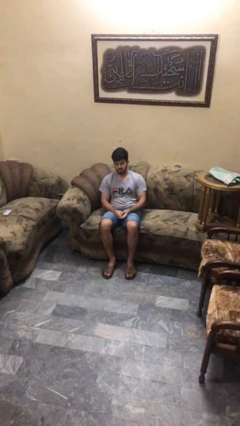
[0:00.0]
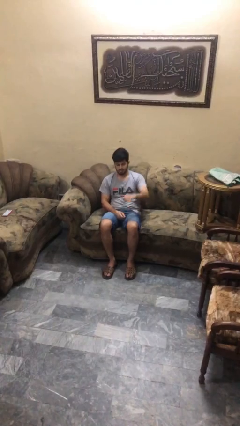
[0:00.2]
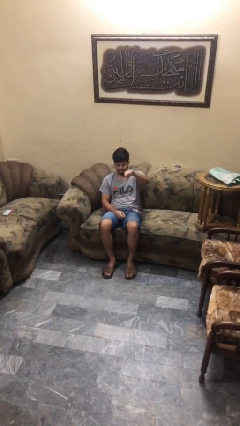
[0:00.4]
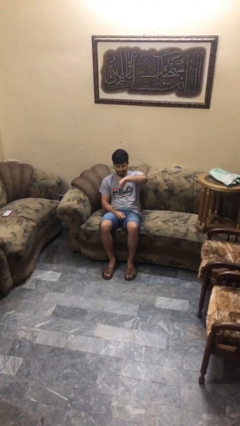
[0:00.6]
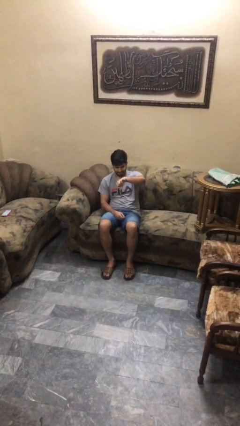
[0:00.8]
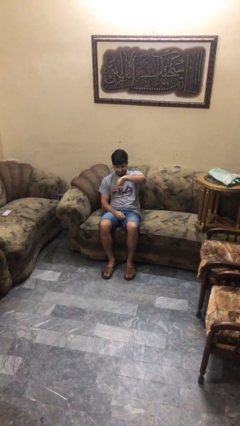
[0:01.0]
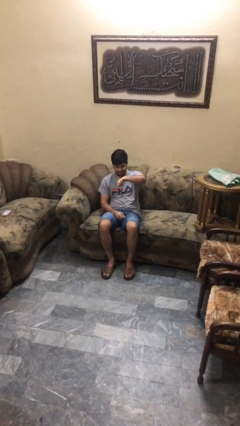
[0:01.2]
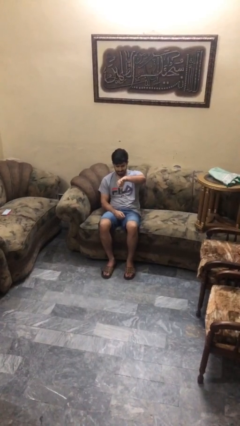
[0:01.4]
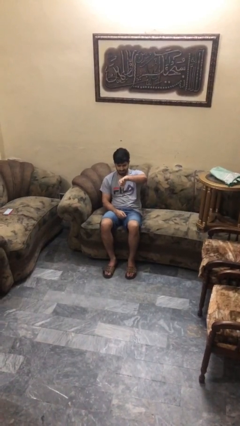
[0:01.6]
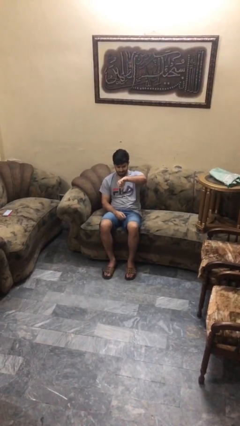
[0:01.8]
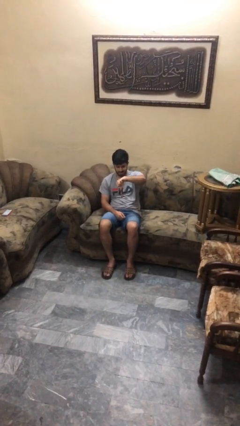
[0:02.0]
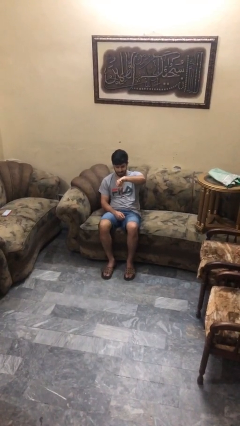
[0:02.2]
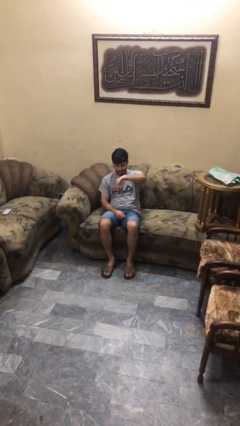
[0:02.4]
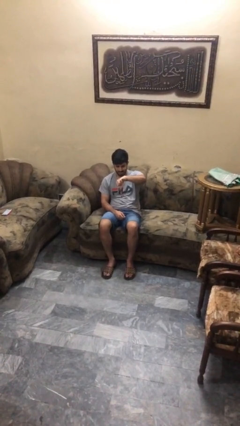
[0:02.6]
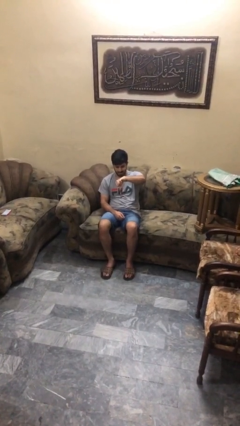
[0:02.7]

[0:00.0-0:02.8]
person gestures thumbs down

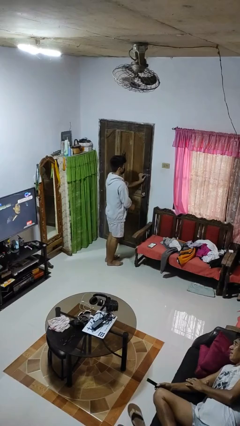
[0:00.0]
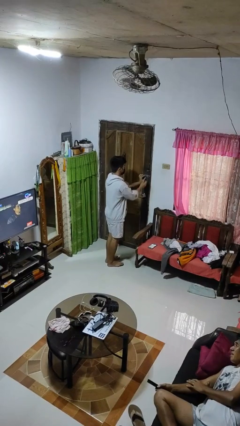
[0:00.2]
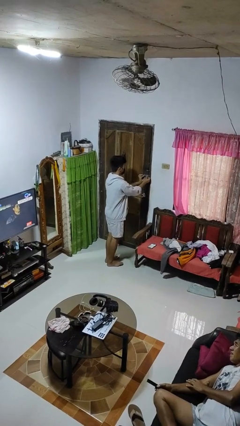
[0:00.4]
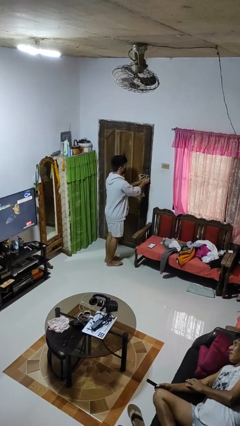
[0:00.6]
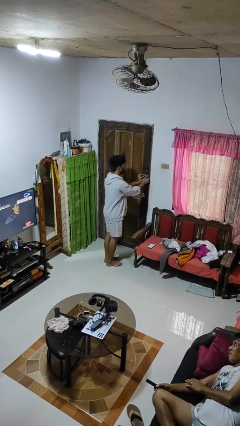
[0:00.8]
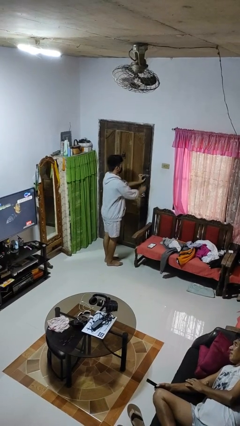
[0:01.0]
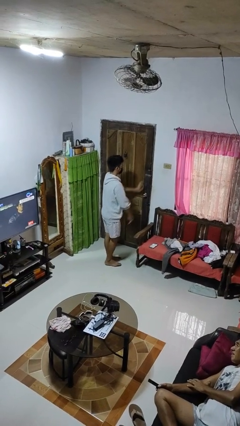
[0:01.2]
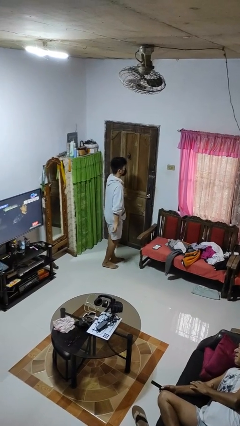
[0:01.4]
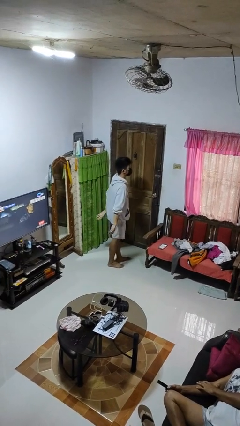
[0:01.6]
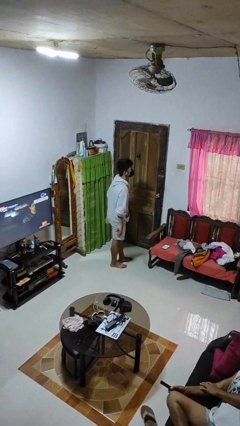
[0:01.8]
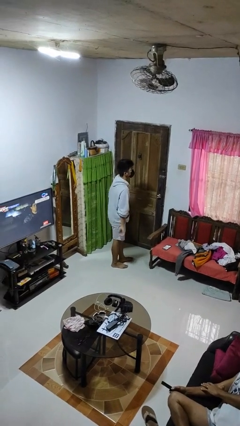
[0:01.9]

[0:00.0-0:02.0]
person locks door with keys

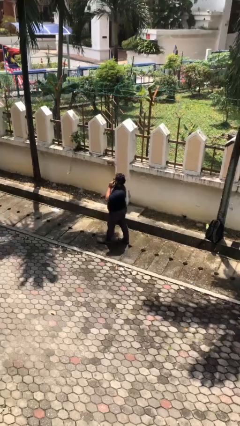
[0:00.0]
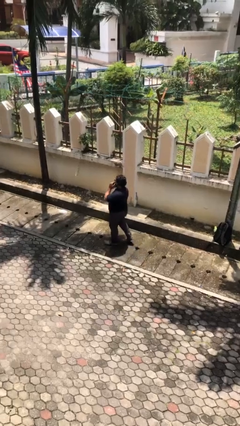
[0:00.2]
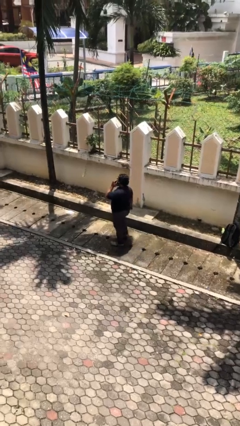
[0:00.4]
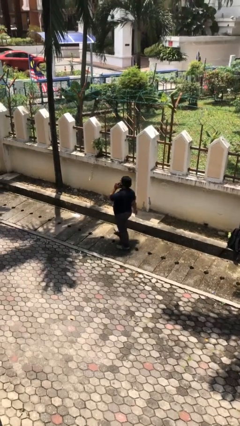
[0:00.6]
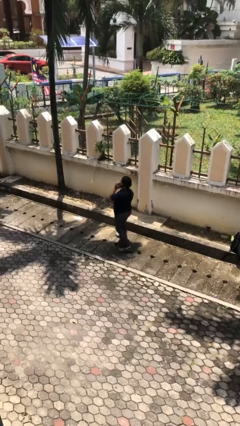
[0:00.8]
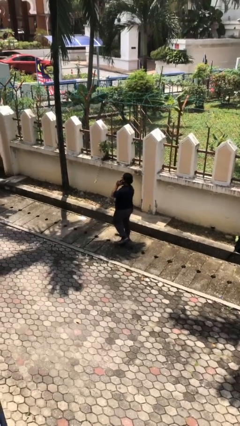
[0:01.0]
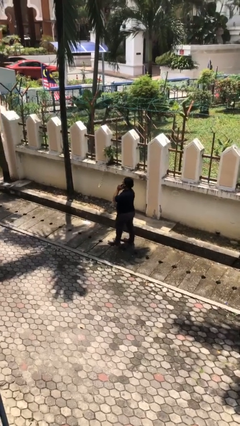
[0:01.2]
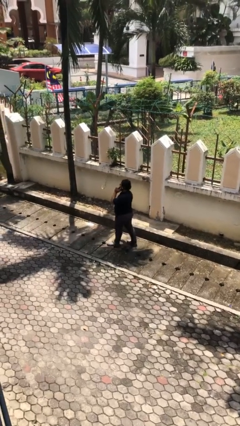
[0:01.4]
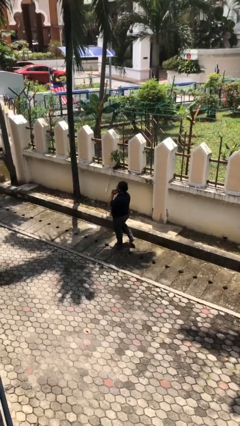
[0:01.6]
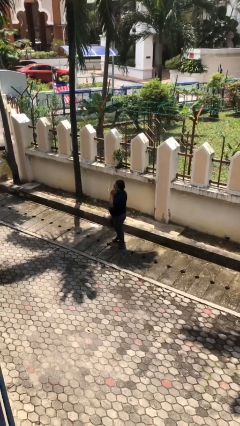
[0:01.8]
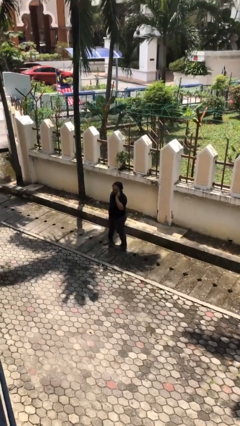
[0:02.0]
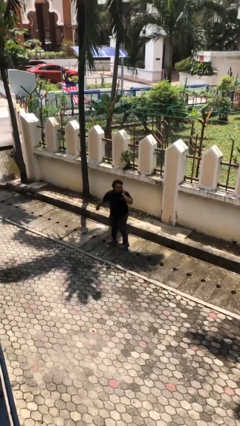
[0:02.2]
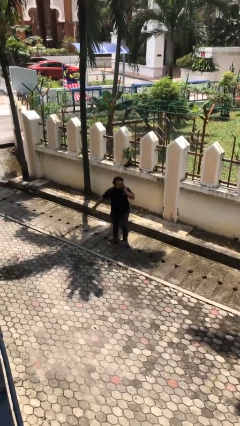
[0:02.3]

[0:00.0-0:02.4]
person talks on phone

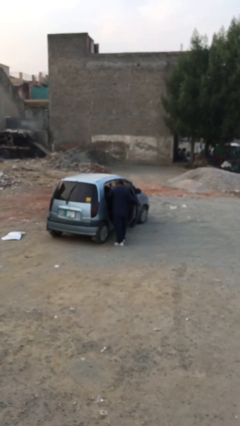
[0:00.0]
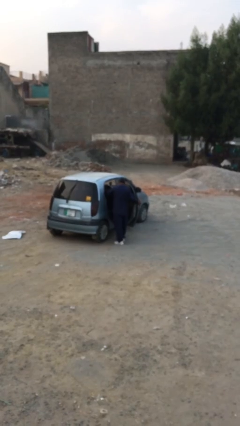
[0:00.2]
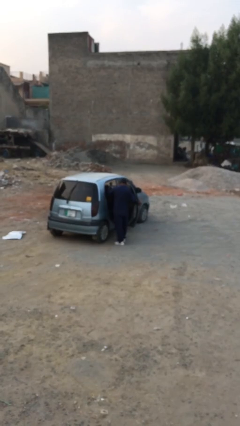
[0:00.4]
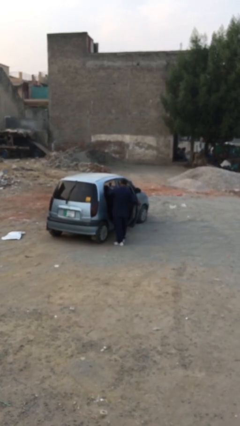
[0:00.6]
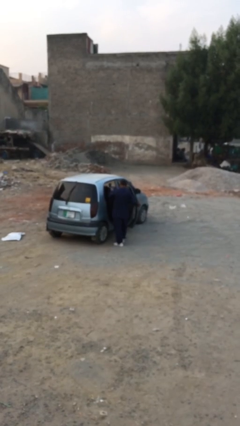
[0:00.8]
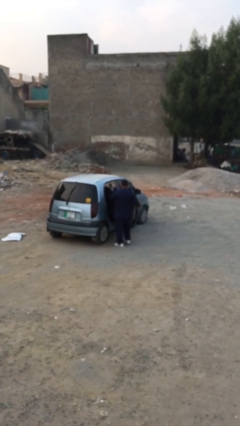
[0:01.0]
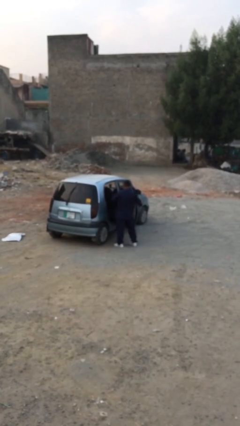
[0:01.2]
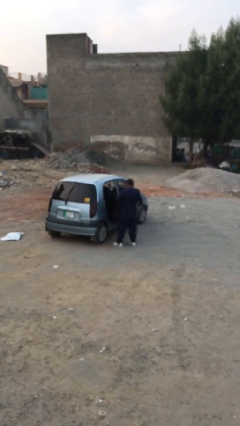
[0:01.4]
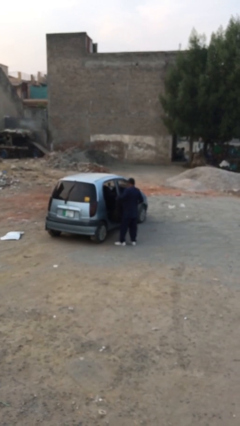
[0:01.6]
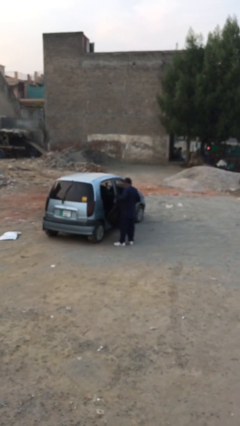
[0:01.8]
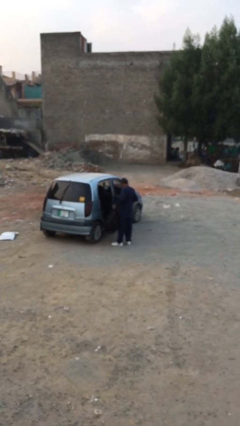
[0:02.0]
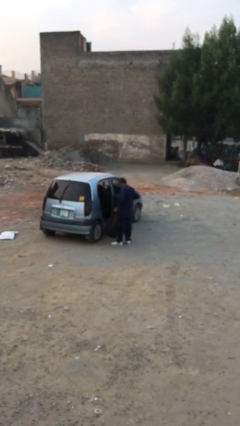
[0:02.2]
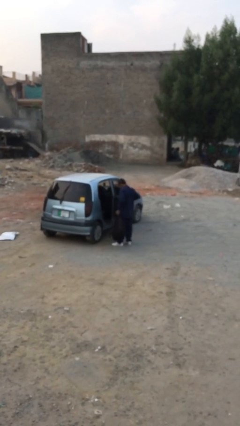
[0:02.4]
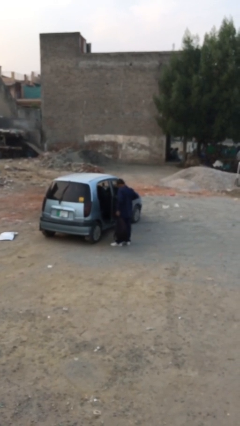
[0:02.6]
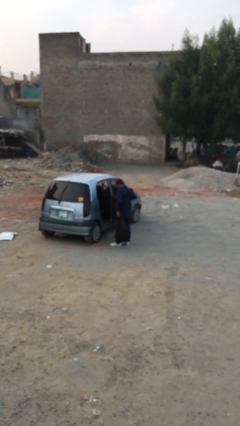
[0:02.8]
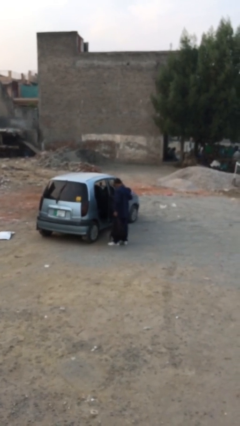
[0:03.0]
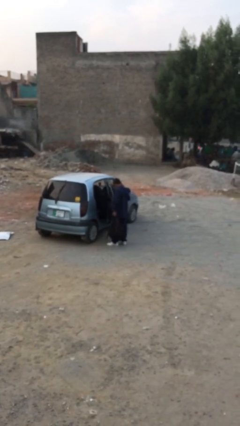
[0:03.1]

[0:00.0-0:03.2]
person unloads car

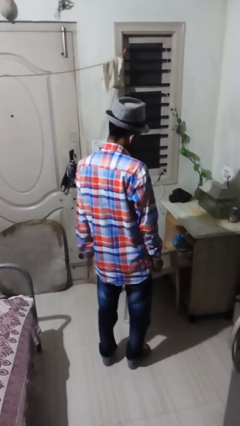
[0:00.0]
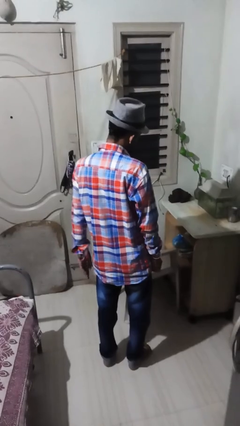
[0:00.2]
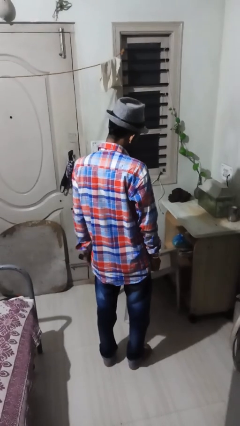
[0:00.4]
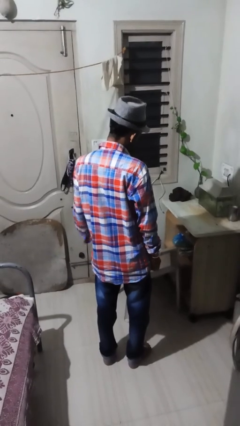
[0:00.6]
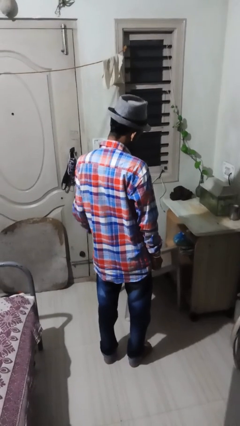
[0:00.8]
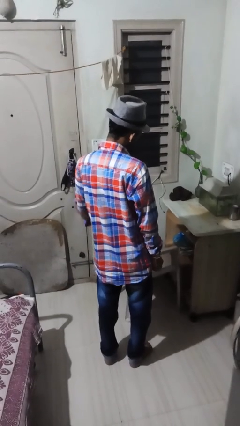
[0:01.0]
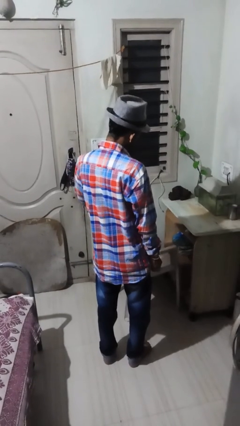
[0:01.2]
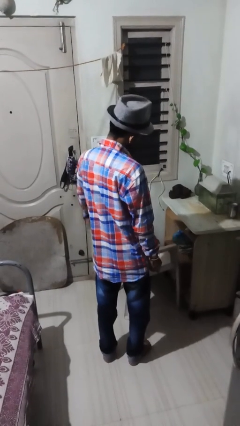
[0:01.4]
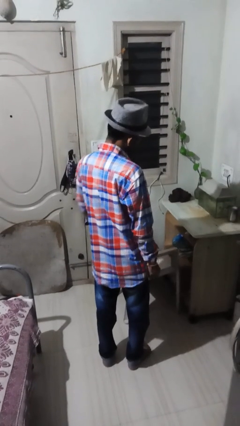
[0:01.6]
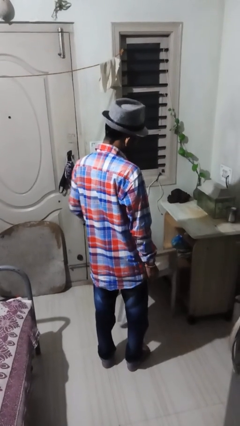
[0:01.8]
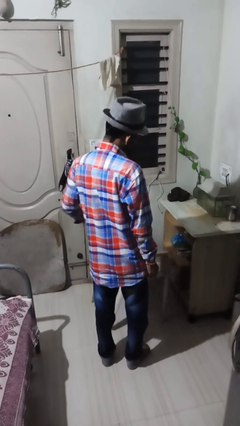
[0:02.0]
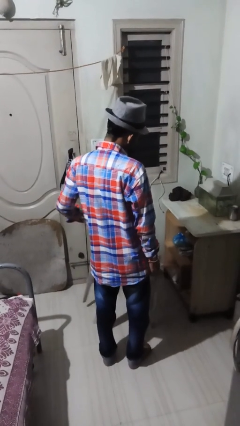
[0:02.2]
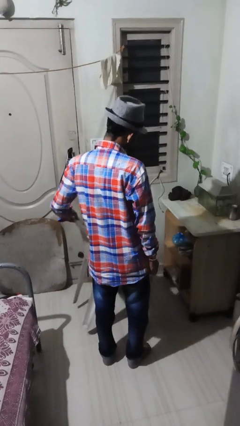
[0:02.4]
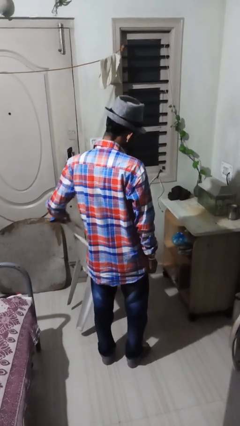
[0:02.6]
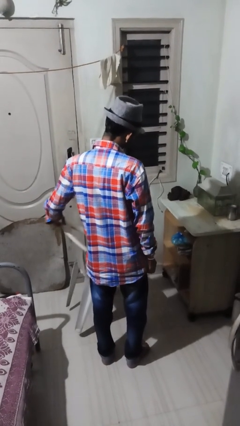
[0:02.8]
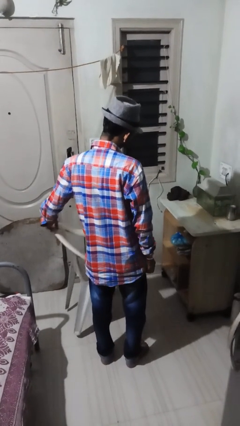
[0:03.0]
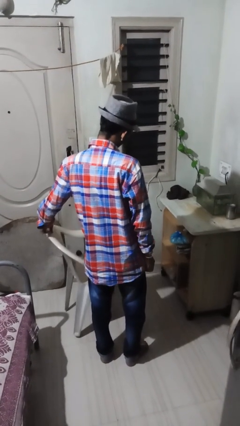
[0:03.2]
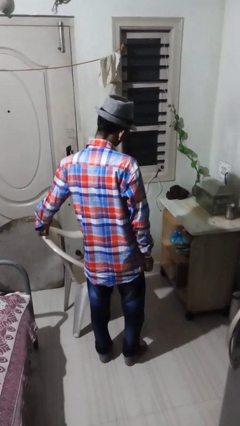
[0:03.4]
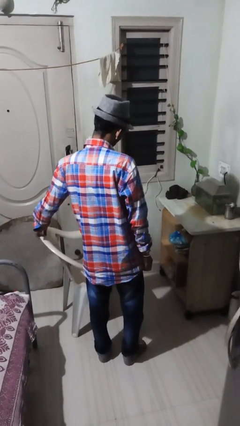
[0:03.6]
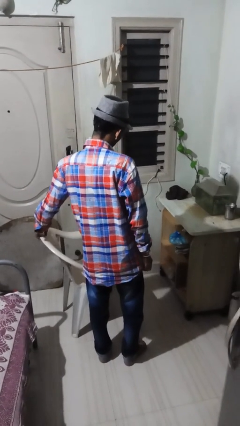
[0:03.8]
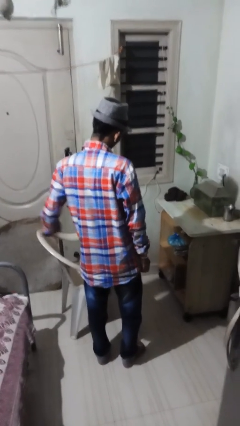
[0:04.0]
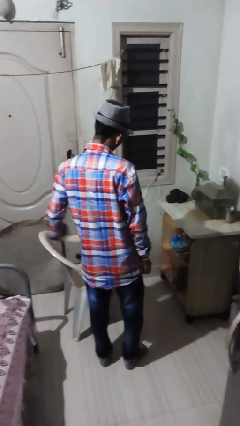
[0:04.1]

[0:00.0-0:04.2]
person pulls out chair

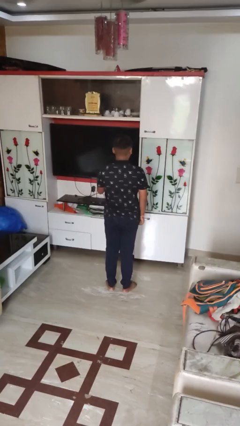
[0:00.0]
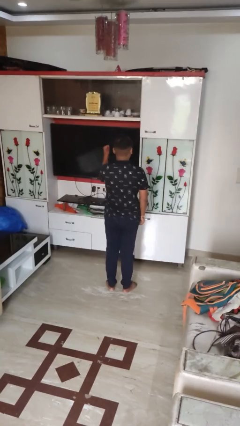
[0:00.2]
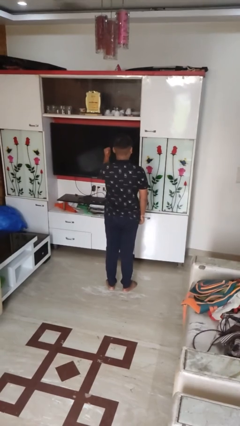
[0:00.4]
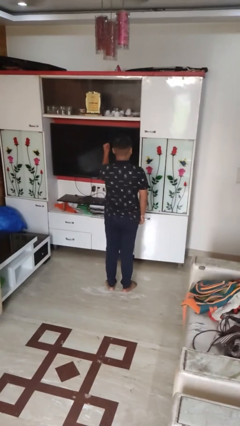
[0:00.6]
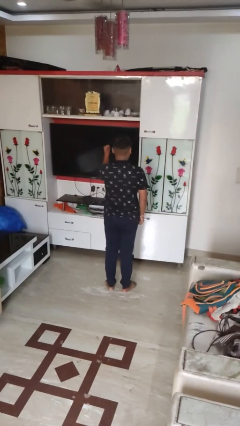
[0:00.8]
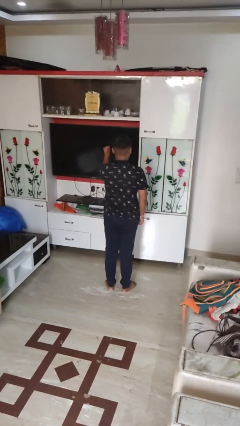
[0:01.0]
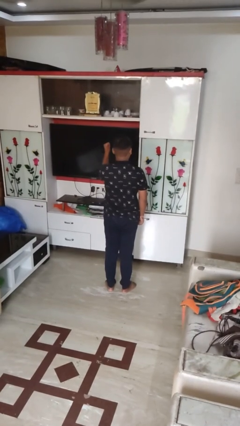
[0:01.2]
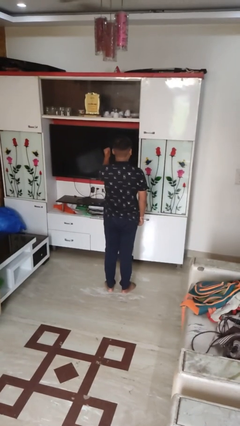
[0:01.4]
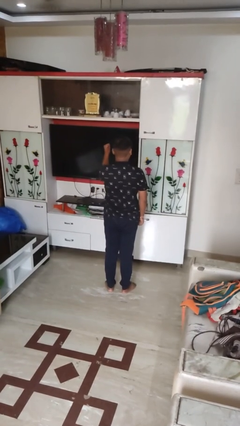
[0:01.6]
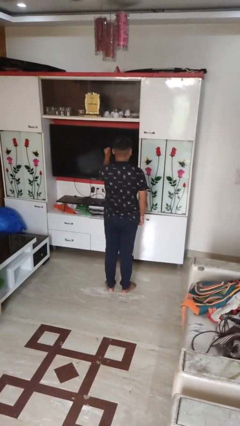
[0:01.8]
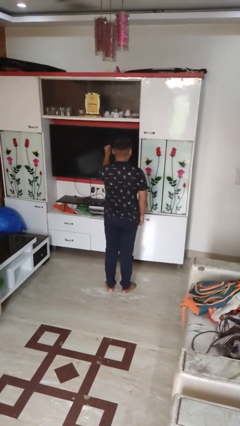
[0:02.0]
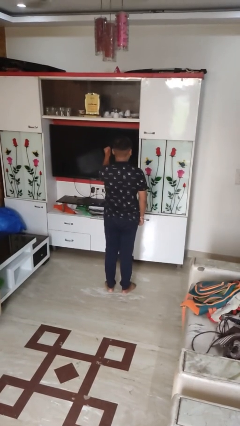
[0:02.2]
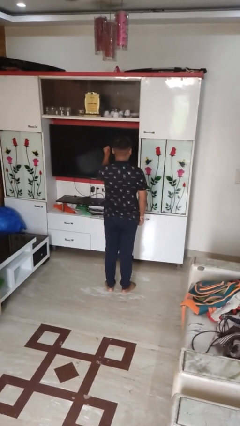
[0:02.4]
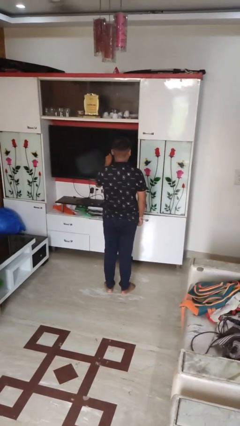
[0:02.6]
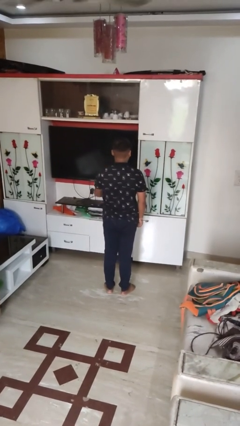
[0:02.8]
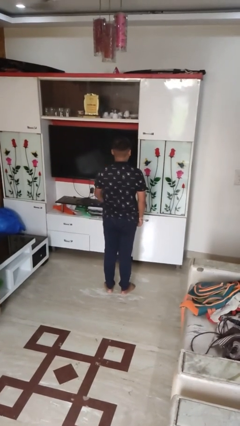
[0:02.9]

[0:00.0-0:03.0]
person gestures behind me
